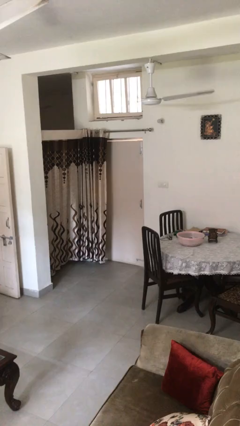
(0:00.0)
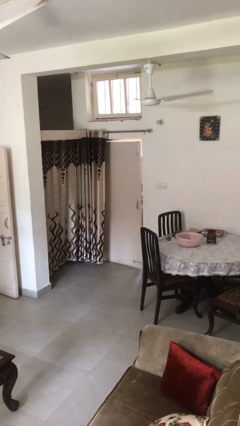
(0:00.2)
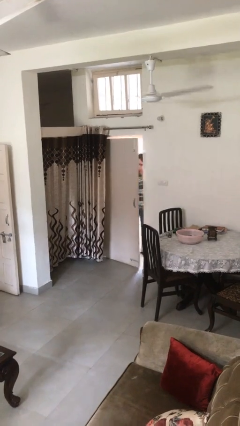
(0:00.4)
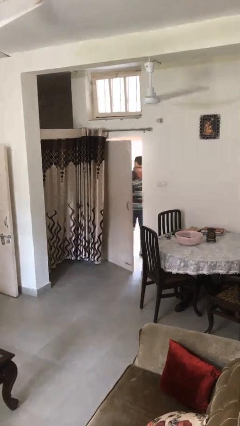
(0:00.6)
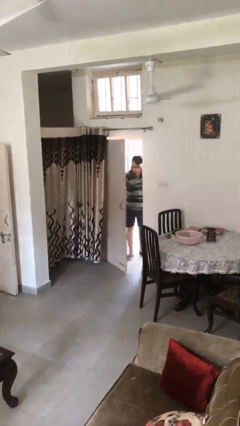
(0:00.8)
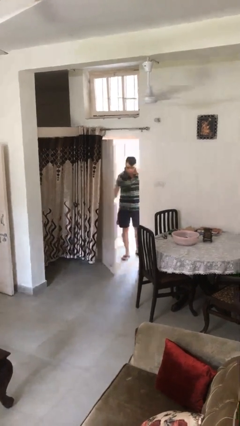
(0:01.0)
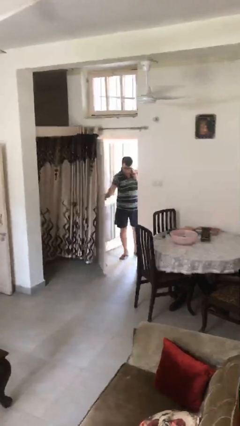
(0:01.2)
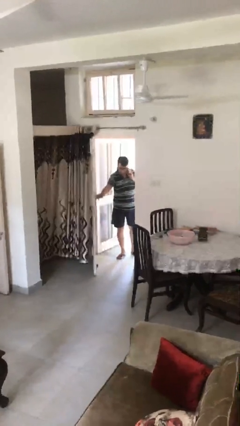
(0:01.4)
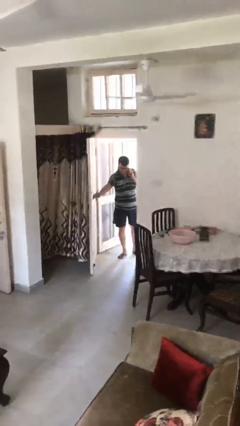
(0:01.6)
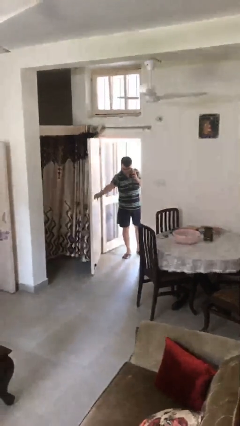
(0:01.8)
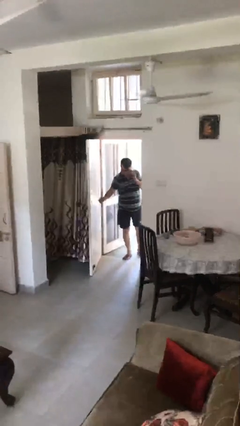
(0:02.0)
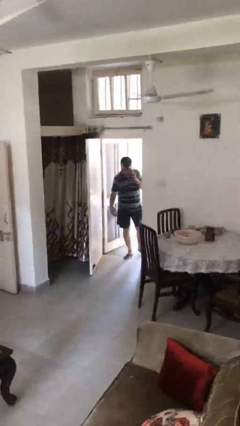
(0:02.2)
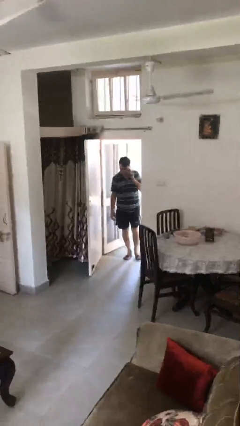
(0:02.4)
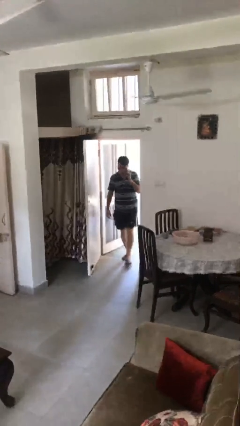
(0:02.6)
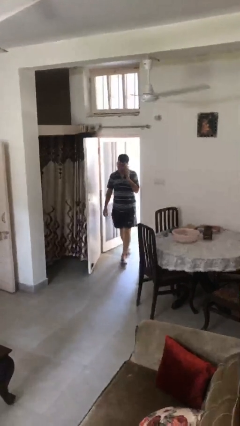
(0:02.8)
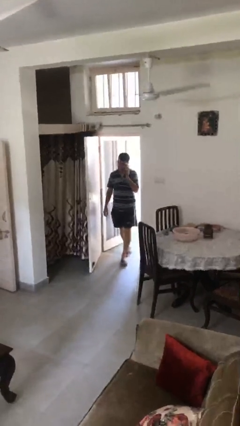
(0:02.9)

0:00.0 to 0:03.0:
person opens facility door

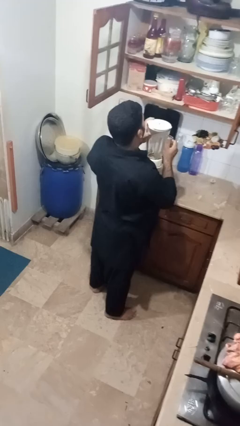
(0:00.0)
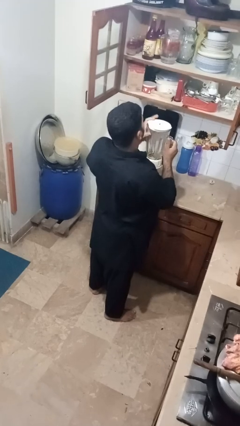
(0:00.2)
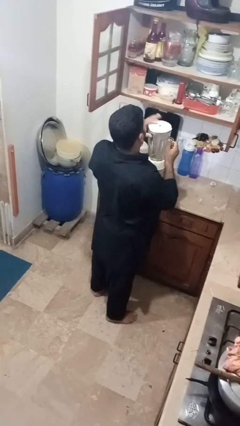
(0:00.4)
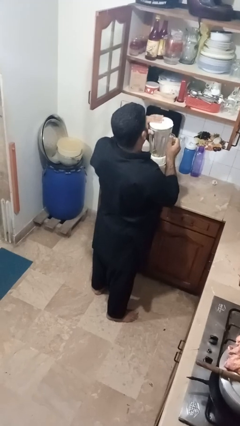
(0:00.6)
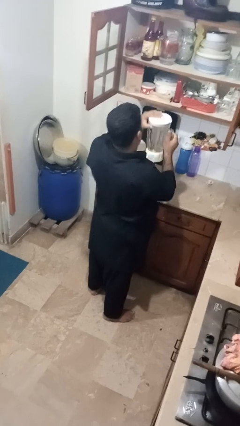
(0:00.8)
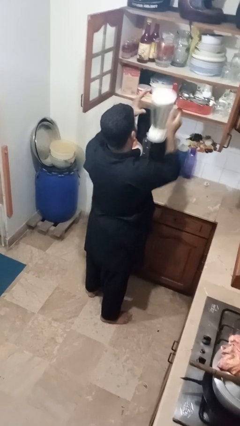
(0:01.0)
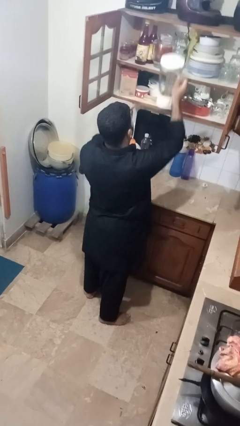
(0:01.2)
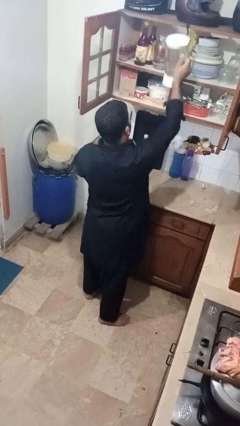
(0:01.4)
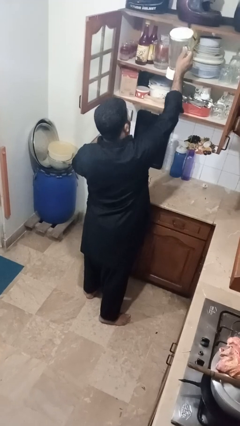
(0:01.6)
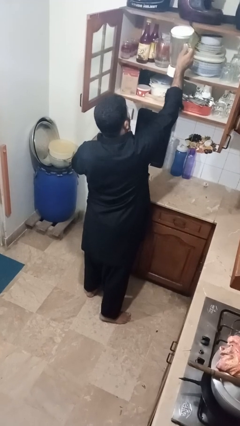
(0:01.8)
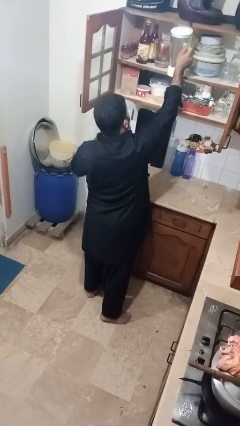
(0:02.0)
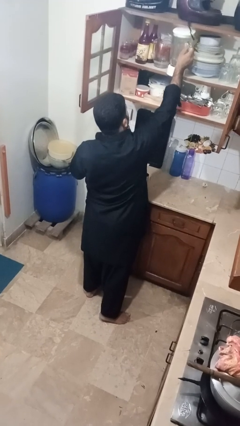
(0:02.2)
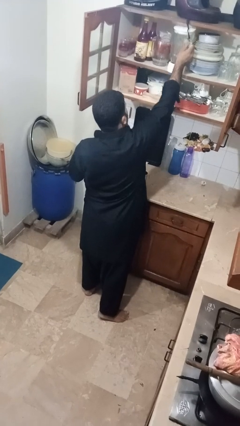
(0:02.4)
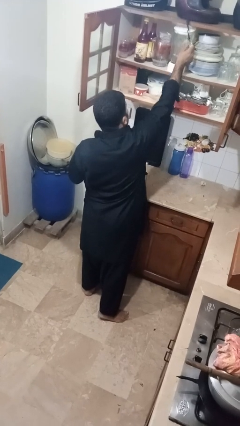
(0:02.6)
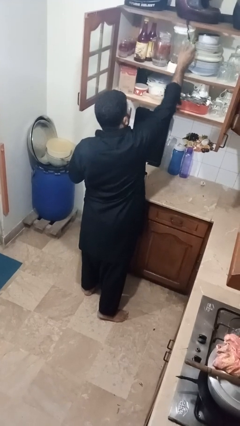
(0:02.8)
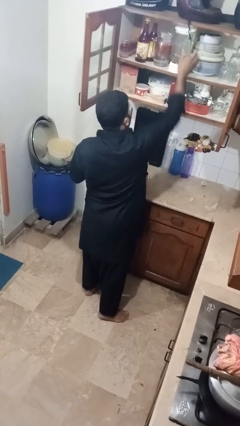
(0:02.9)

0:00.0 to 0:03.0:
person puts down object into cabinet

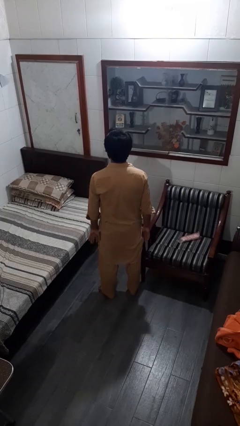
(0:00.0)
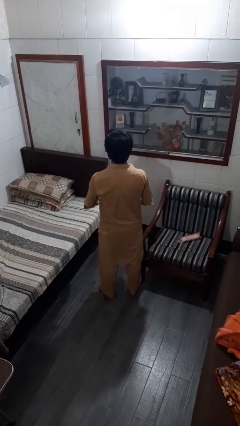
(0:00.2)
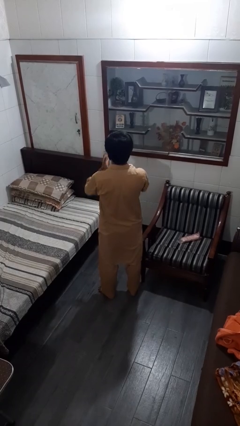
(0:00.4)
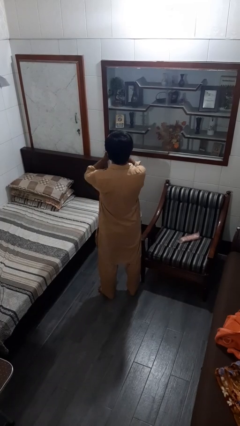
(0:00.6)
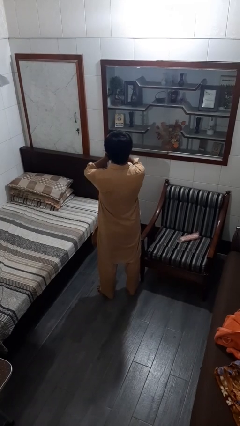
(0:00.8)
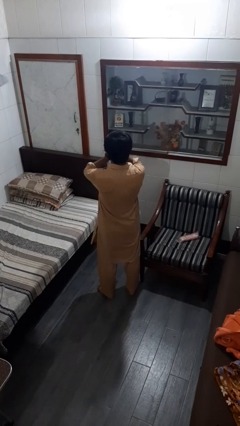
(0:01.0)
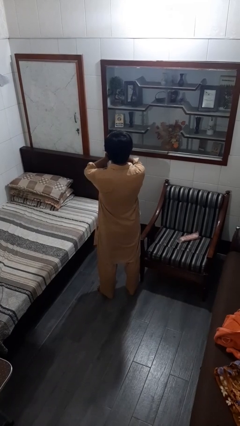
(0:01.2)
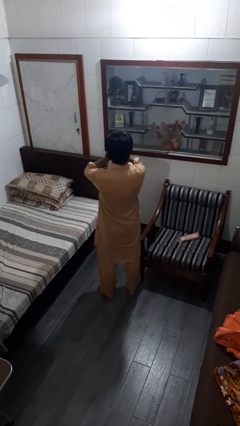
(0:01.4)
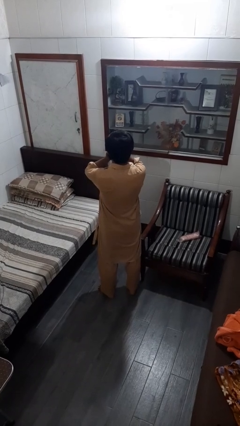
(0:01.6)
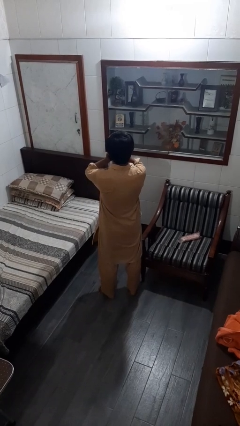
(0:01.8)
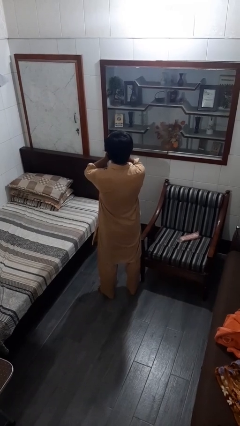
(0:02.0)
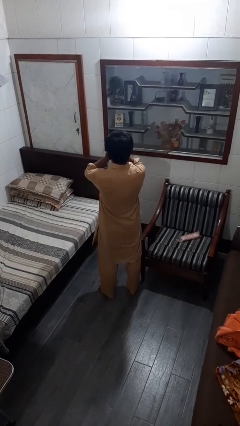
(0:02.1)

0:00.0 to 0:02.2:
person covers face with hands

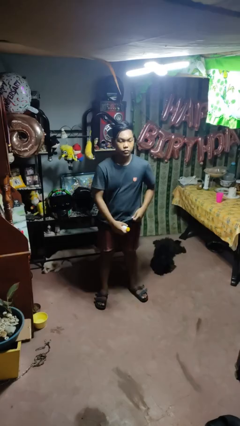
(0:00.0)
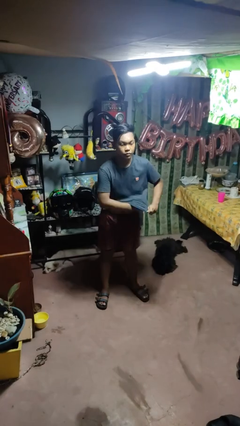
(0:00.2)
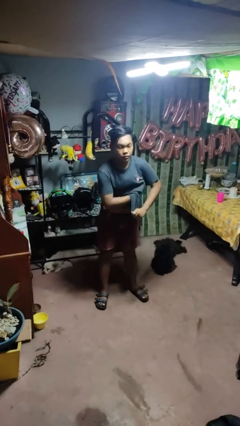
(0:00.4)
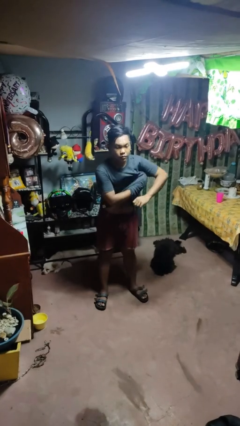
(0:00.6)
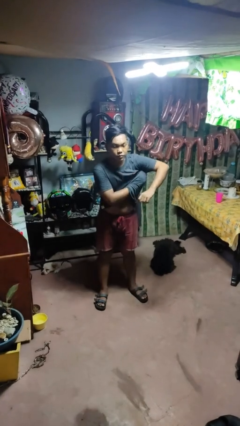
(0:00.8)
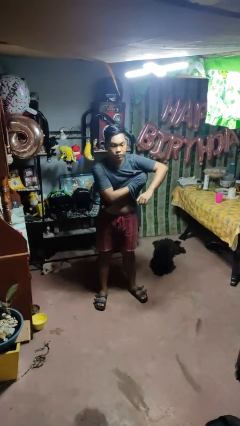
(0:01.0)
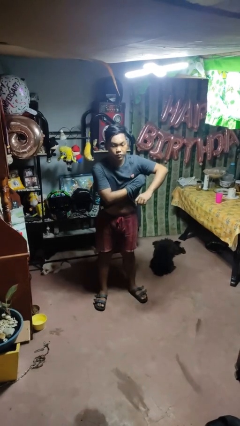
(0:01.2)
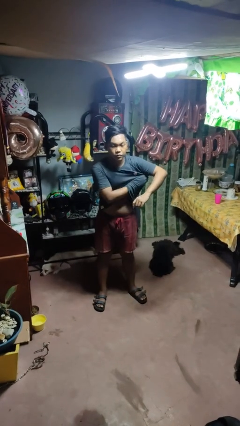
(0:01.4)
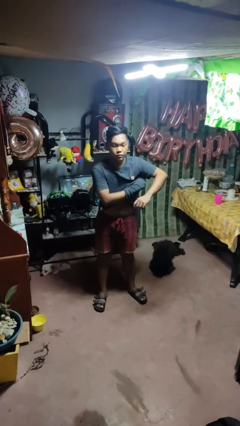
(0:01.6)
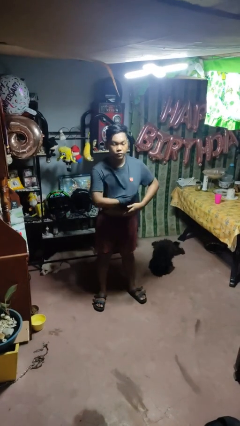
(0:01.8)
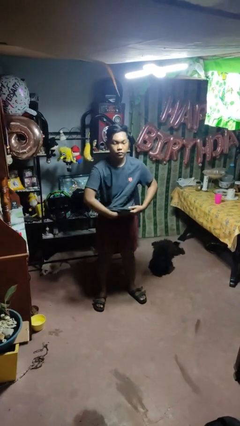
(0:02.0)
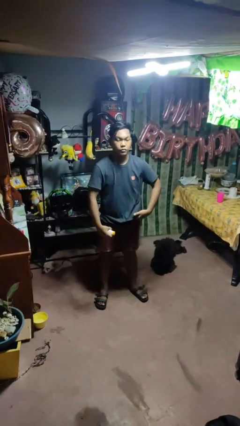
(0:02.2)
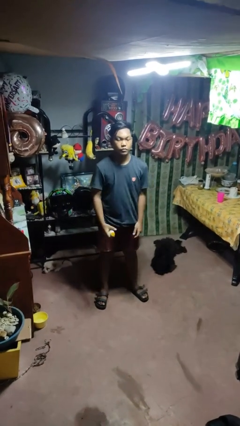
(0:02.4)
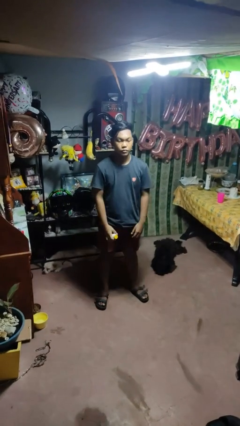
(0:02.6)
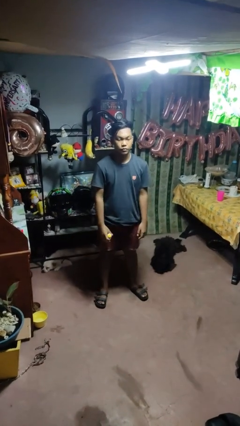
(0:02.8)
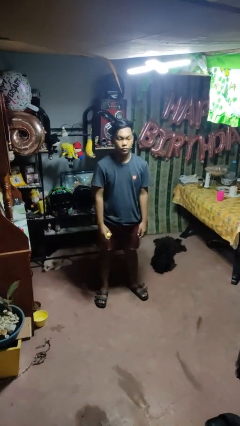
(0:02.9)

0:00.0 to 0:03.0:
person applies deodorant

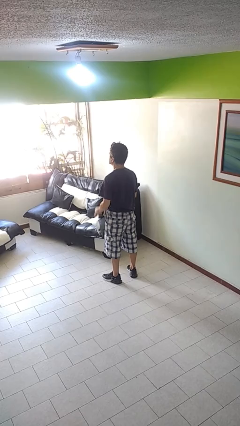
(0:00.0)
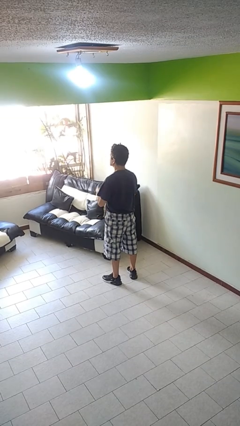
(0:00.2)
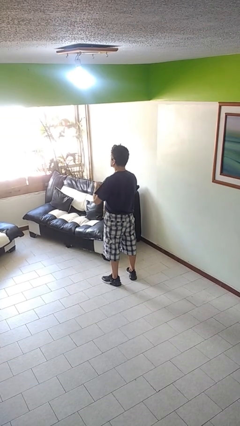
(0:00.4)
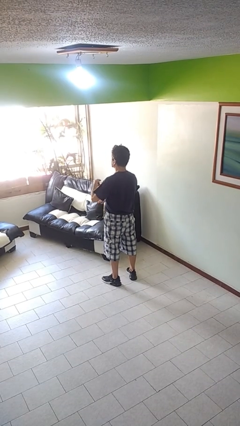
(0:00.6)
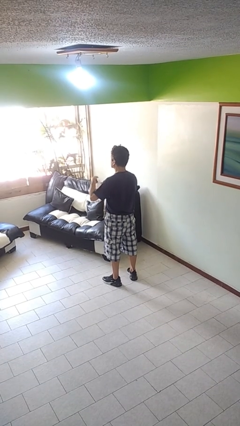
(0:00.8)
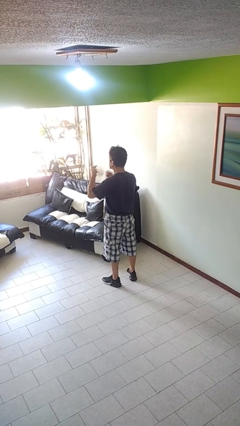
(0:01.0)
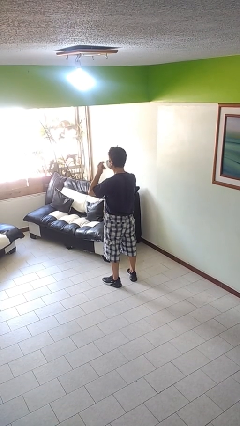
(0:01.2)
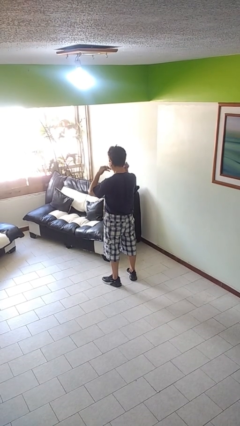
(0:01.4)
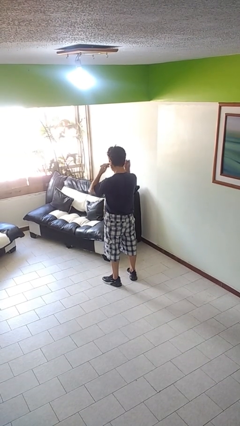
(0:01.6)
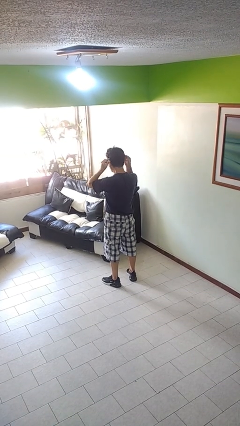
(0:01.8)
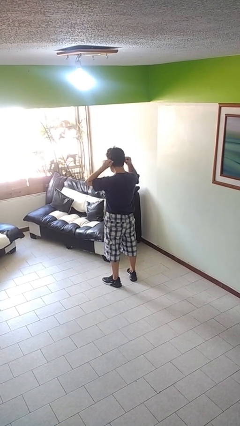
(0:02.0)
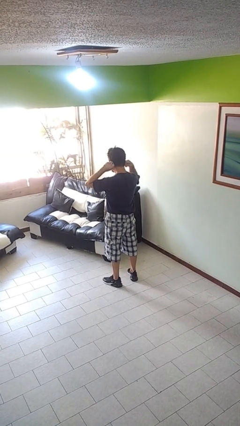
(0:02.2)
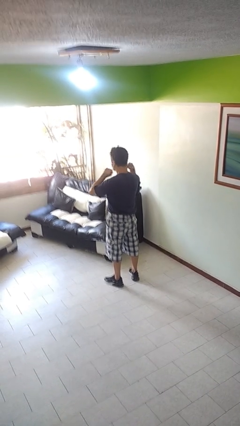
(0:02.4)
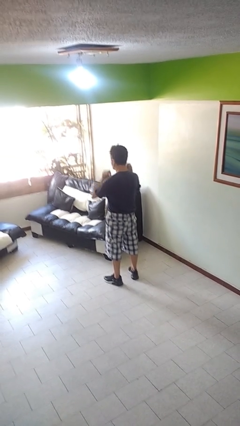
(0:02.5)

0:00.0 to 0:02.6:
person puts on facemask

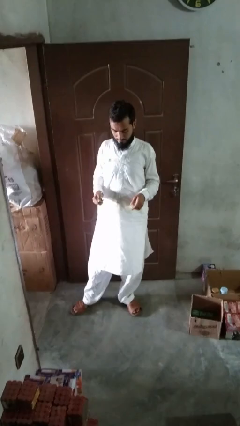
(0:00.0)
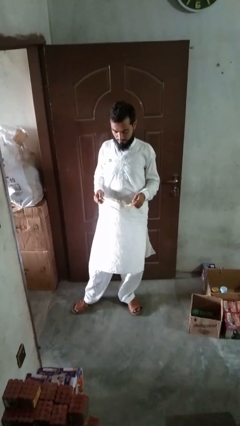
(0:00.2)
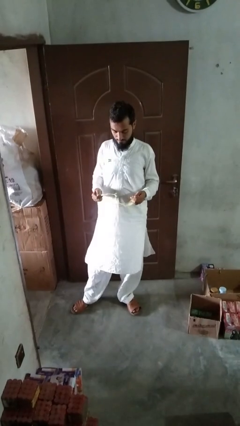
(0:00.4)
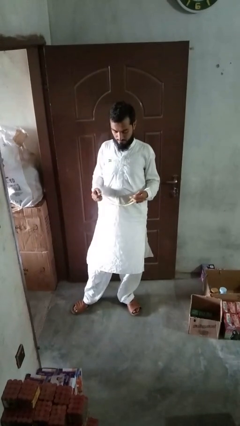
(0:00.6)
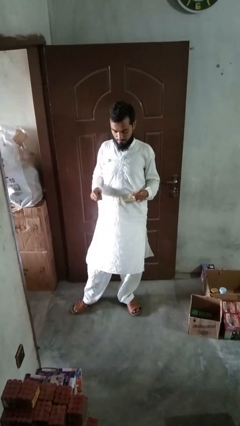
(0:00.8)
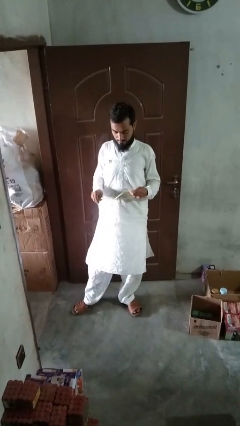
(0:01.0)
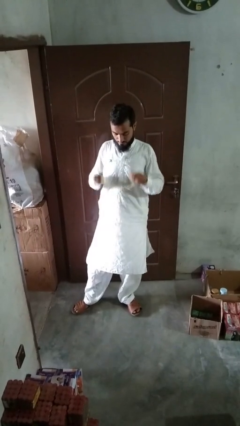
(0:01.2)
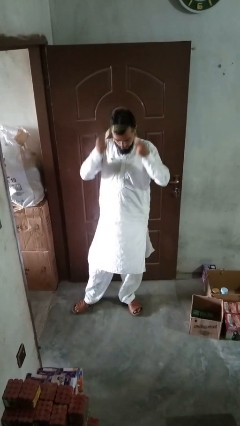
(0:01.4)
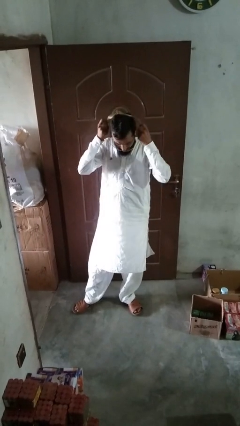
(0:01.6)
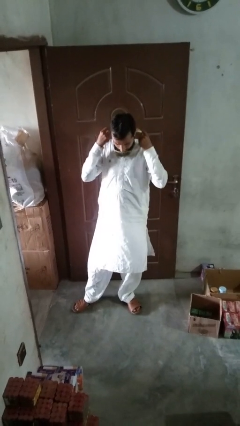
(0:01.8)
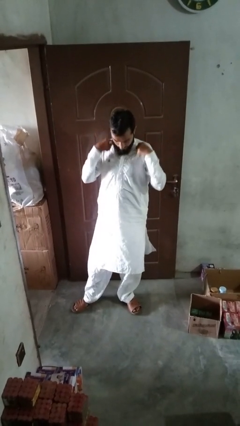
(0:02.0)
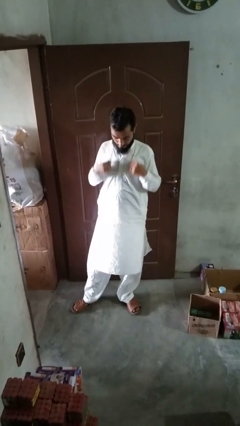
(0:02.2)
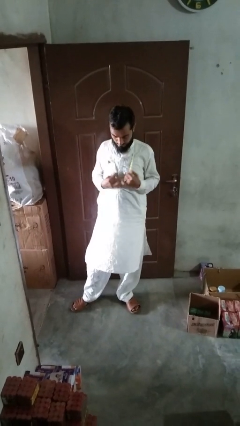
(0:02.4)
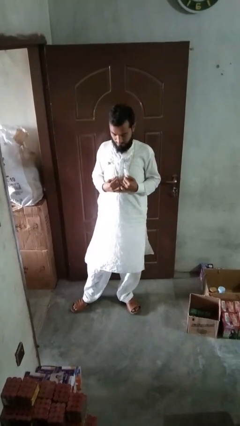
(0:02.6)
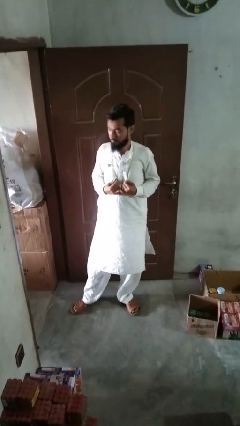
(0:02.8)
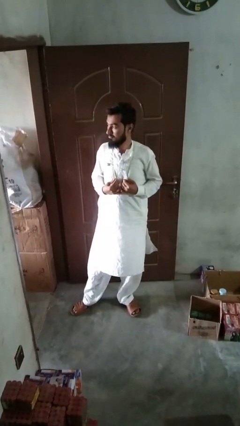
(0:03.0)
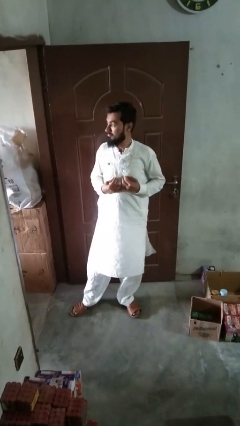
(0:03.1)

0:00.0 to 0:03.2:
person puts on necklace

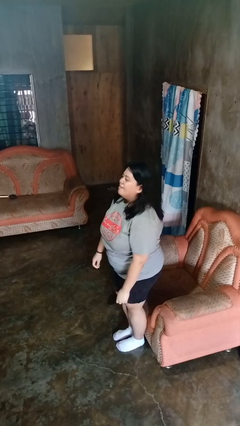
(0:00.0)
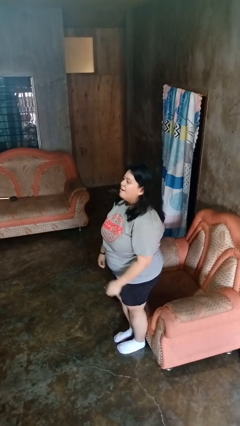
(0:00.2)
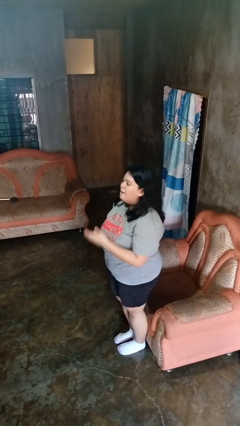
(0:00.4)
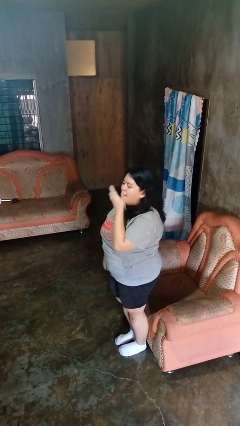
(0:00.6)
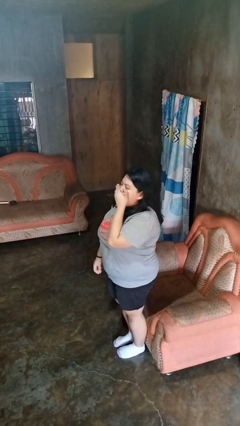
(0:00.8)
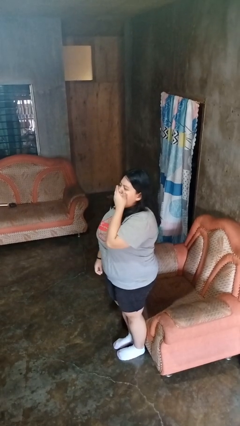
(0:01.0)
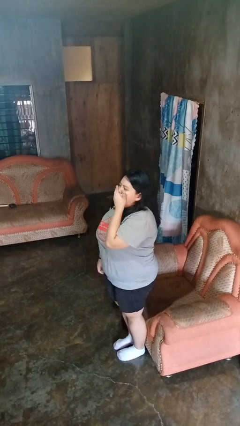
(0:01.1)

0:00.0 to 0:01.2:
person yawns
